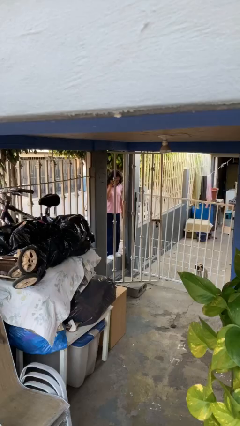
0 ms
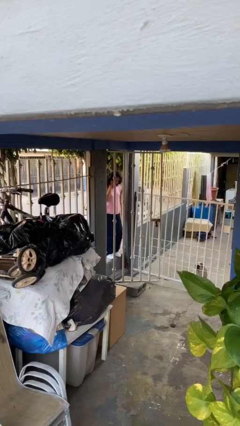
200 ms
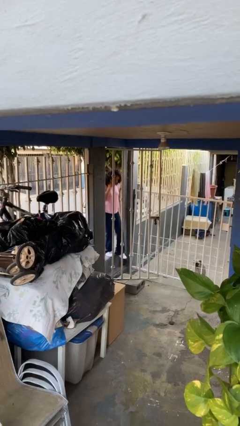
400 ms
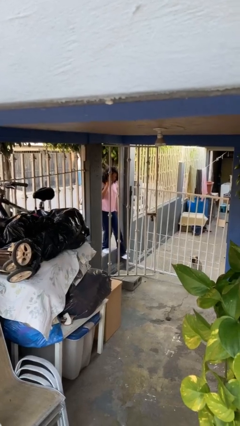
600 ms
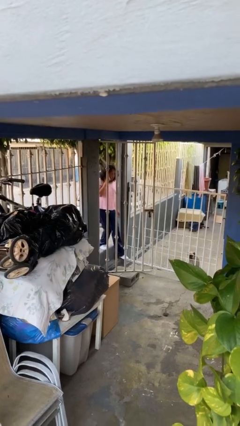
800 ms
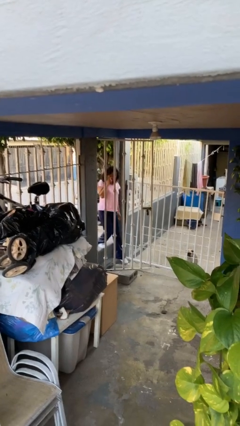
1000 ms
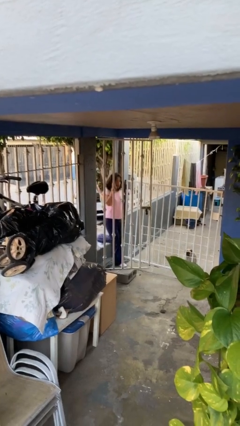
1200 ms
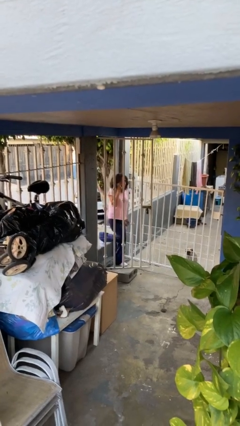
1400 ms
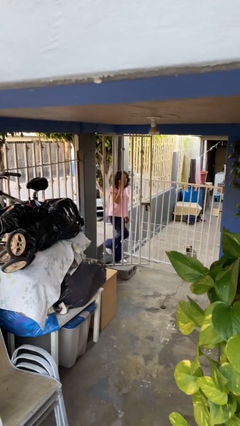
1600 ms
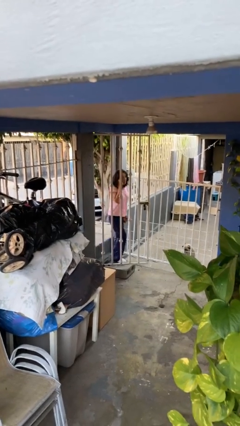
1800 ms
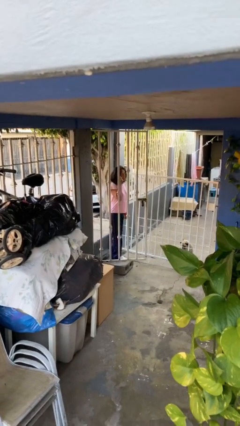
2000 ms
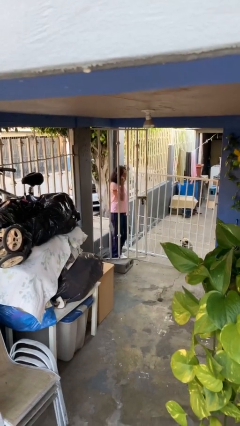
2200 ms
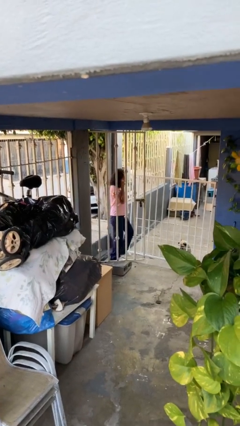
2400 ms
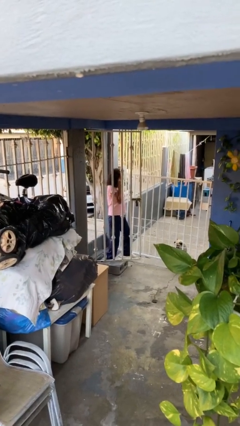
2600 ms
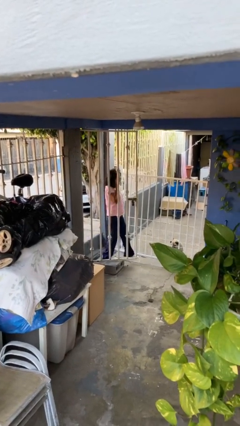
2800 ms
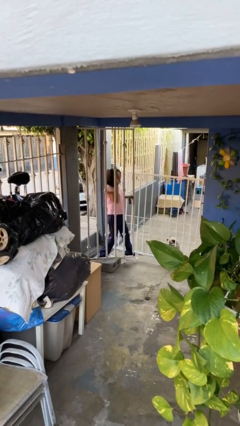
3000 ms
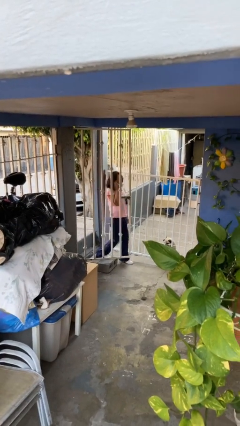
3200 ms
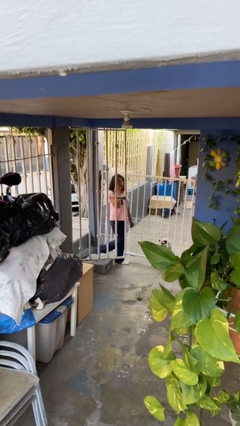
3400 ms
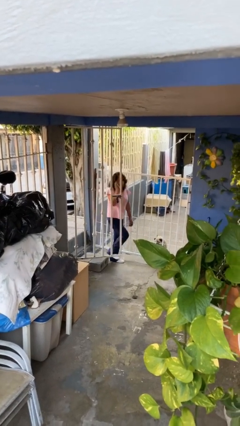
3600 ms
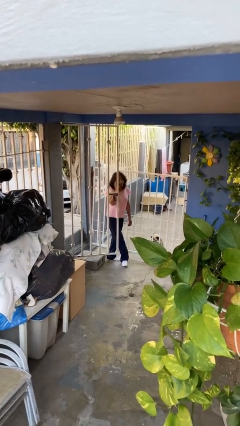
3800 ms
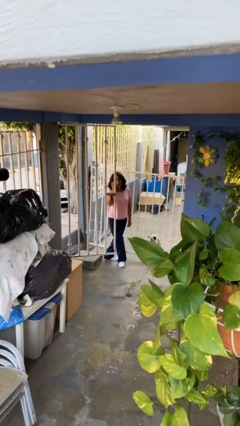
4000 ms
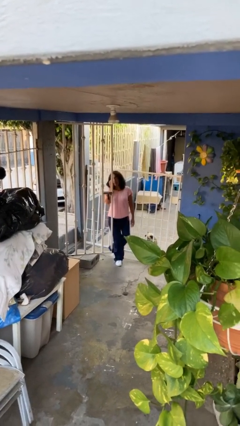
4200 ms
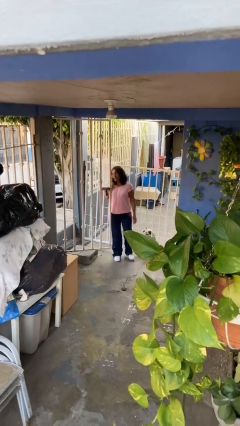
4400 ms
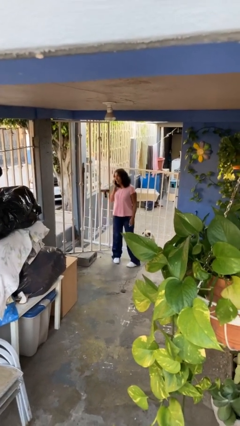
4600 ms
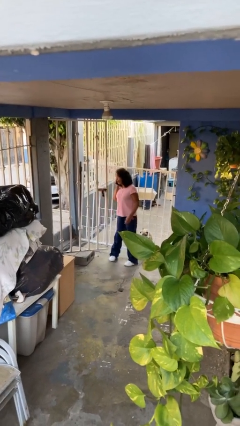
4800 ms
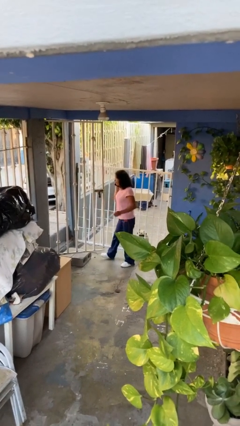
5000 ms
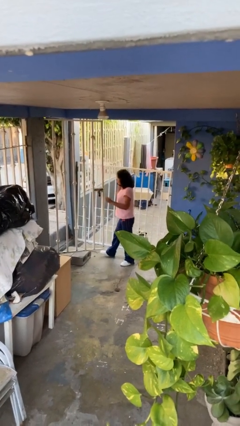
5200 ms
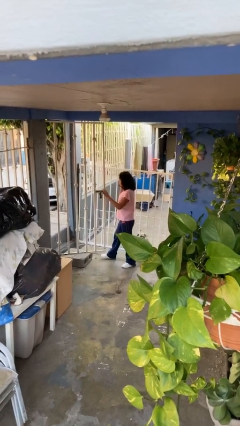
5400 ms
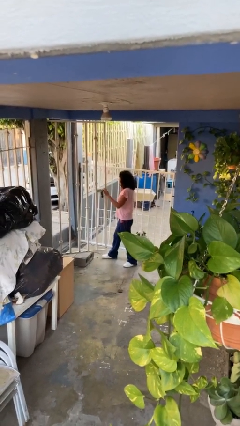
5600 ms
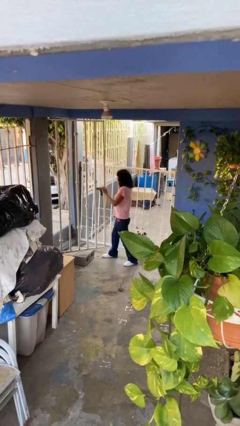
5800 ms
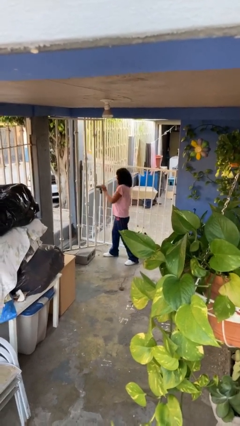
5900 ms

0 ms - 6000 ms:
person enters scene through structure

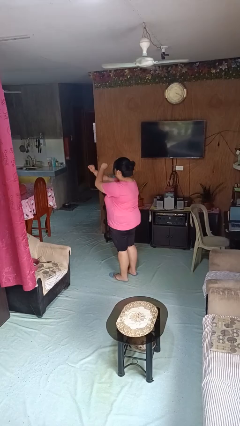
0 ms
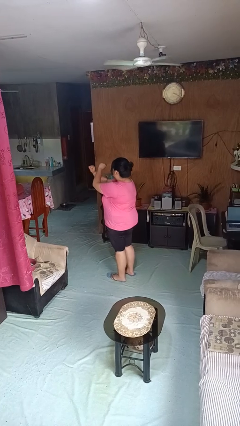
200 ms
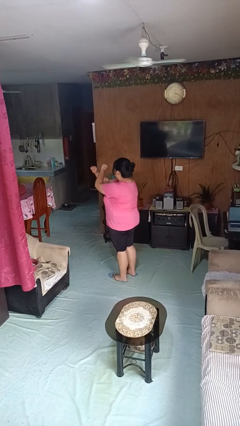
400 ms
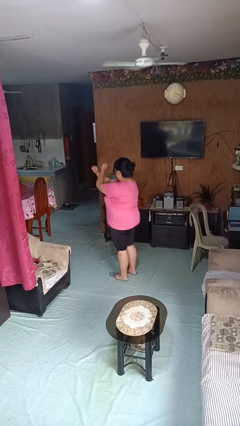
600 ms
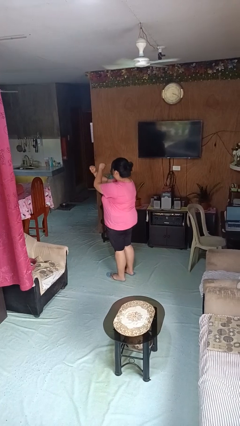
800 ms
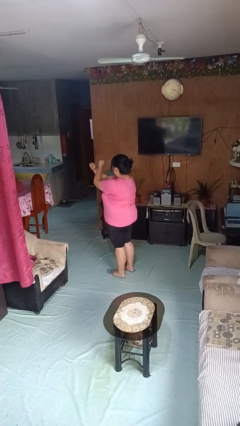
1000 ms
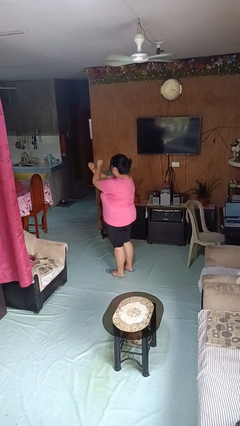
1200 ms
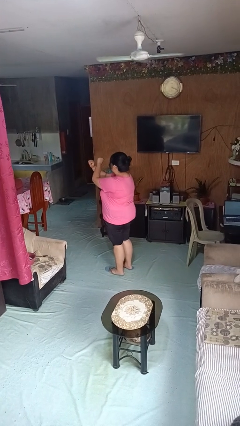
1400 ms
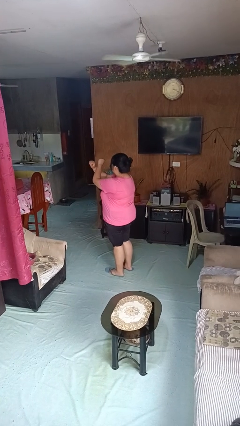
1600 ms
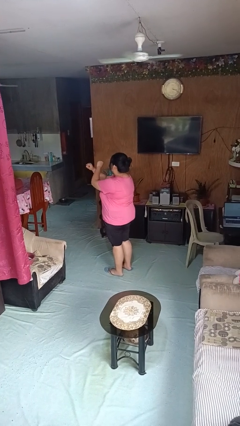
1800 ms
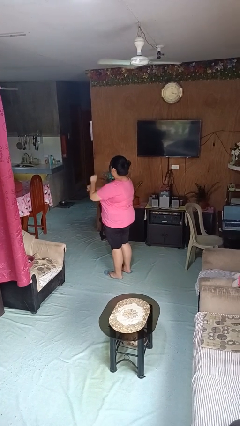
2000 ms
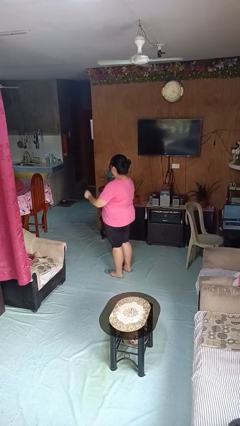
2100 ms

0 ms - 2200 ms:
person gestures arms x

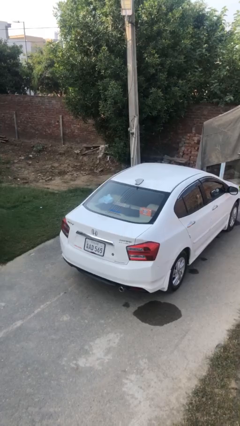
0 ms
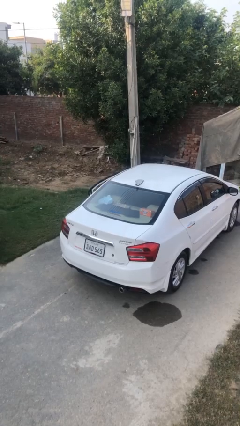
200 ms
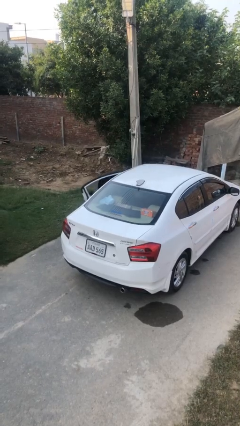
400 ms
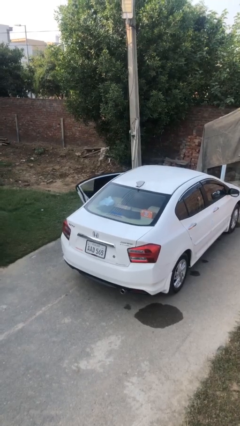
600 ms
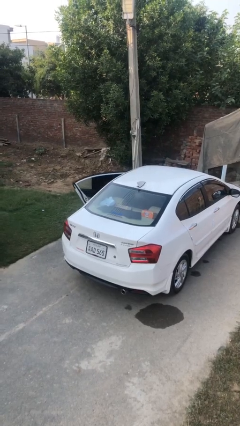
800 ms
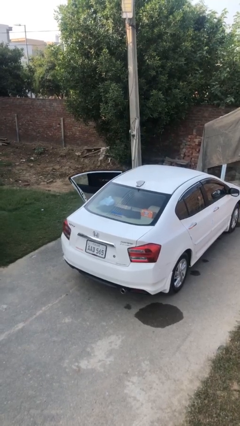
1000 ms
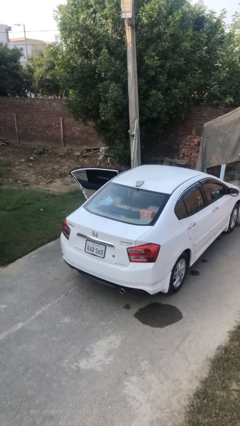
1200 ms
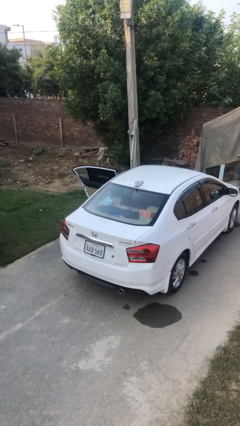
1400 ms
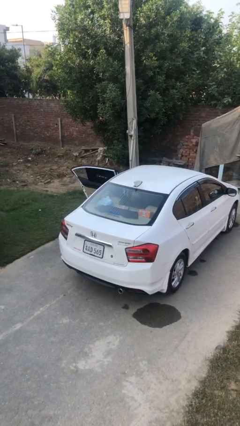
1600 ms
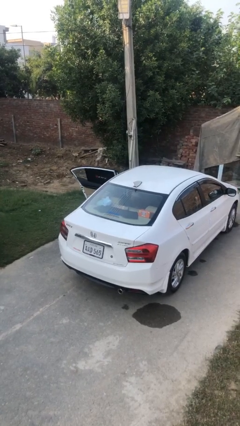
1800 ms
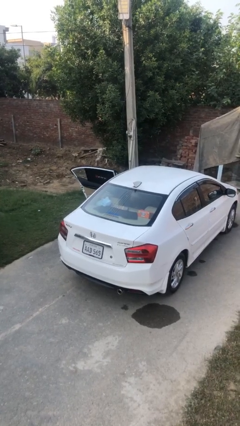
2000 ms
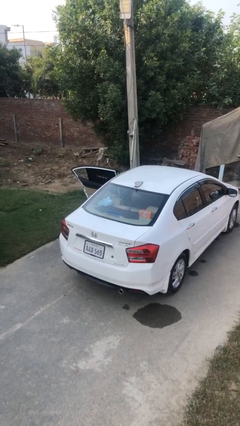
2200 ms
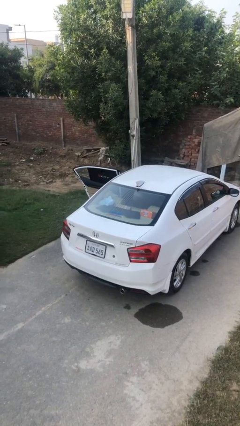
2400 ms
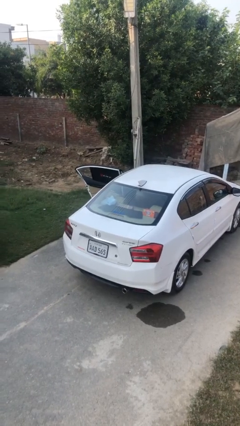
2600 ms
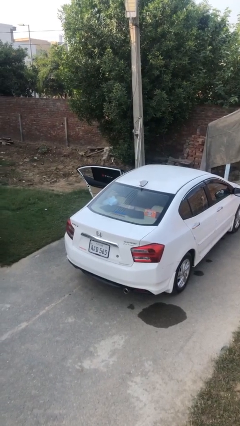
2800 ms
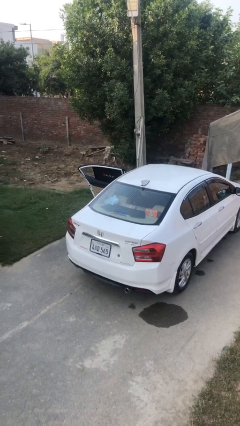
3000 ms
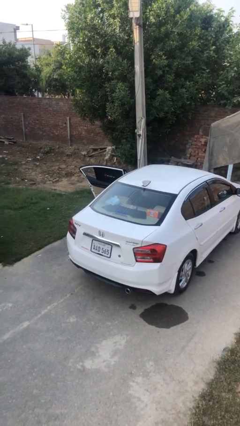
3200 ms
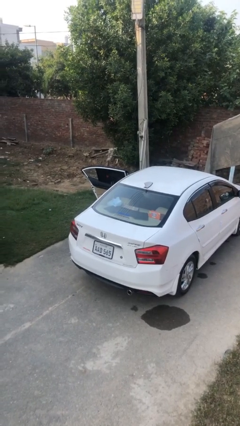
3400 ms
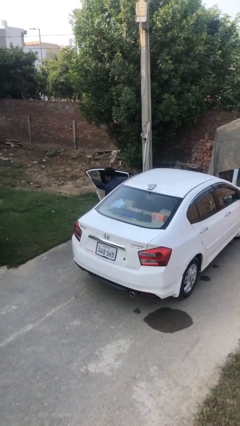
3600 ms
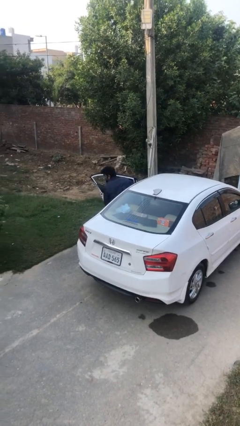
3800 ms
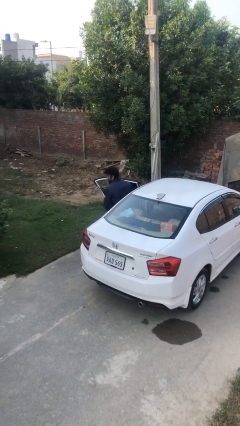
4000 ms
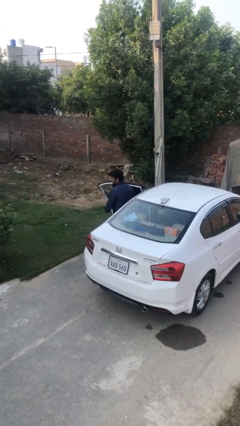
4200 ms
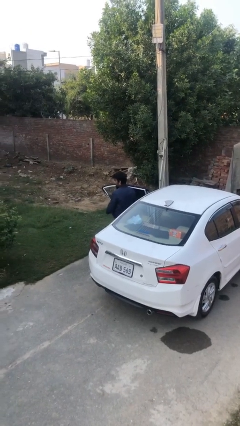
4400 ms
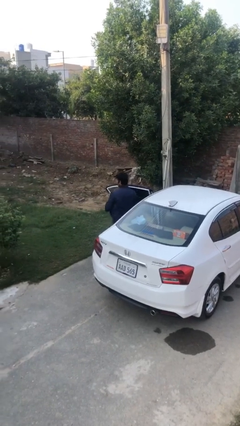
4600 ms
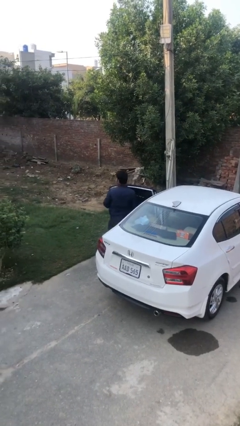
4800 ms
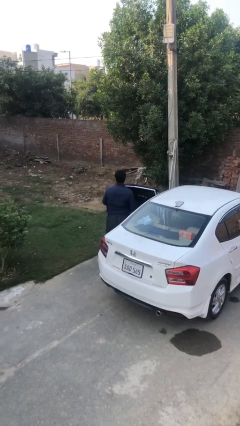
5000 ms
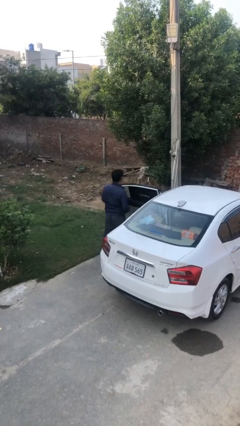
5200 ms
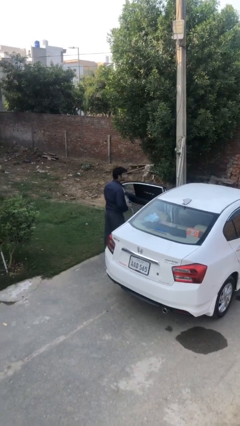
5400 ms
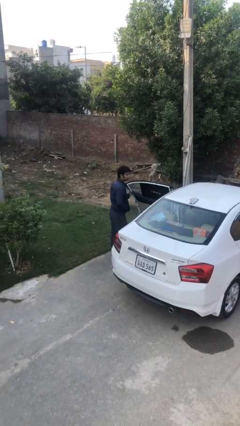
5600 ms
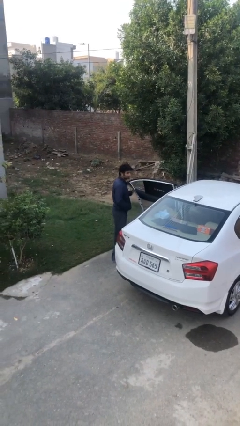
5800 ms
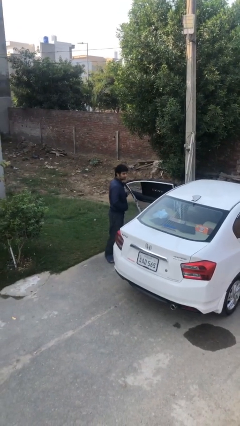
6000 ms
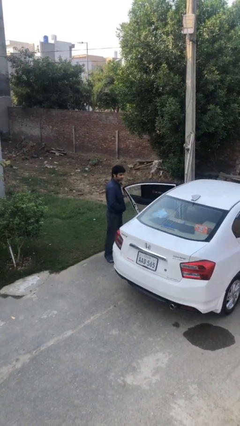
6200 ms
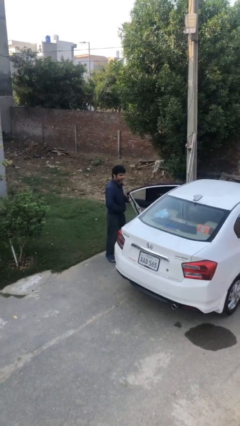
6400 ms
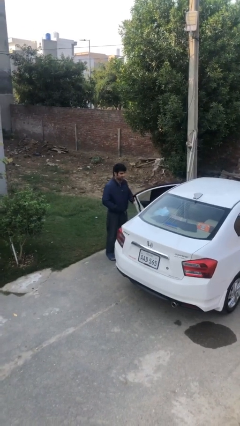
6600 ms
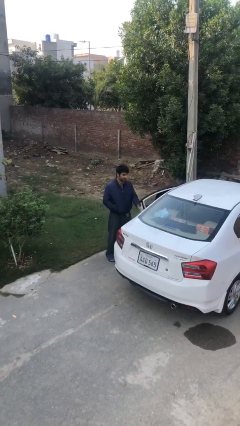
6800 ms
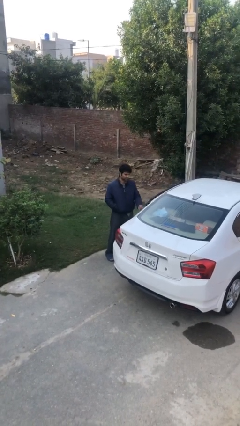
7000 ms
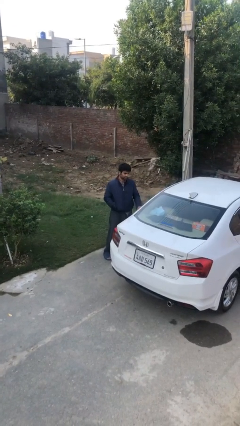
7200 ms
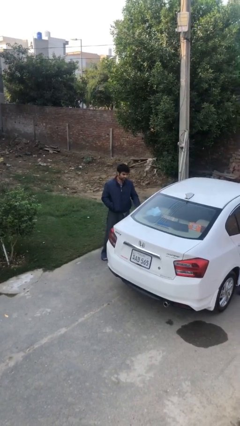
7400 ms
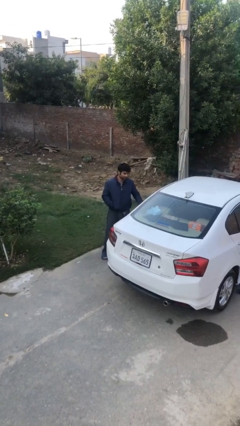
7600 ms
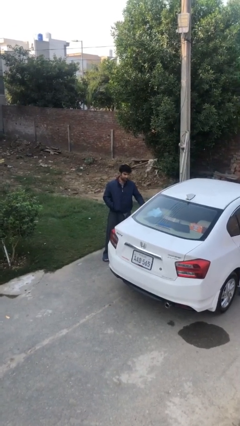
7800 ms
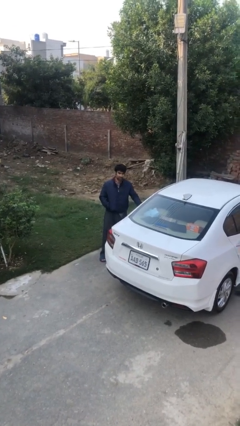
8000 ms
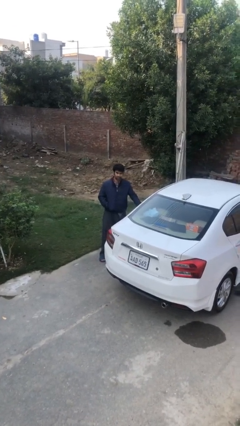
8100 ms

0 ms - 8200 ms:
car drops off person

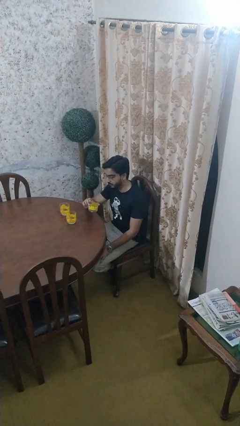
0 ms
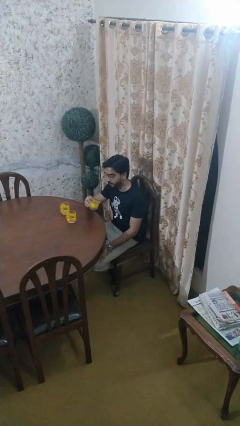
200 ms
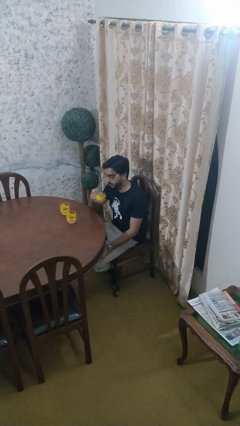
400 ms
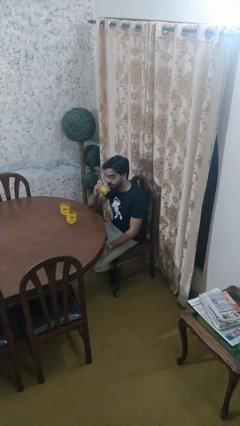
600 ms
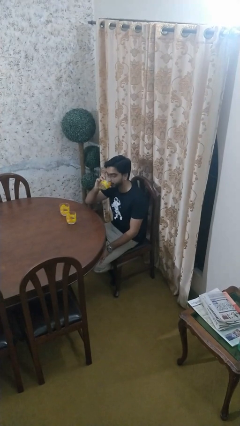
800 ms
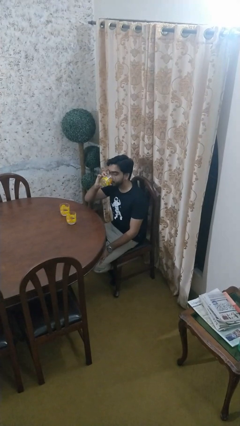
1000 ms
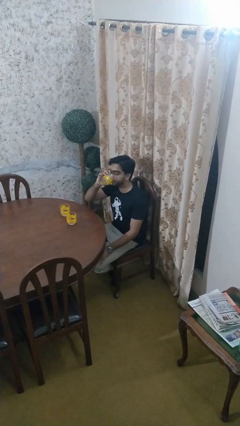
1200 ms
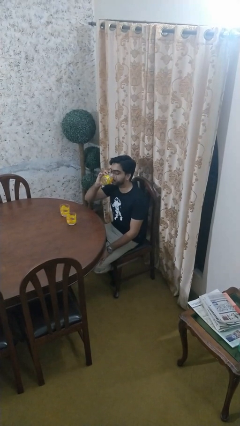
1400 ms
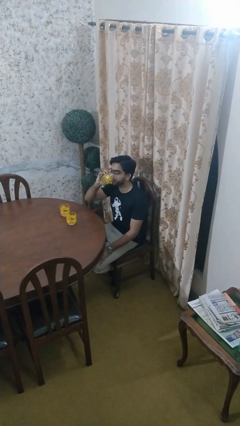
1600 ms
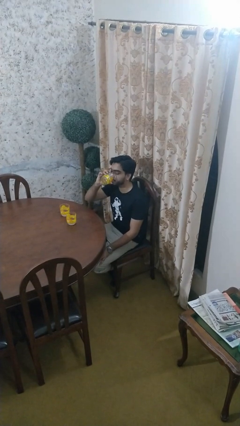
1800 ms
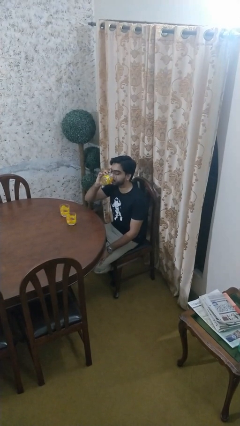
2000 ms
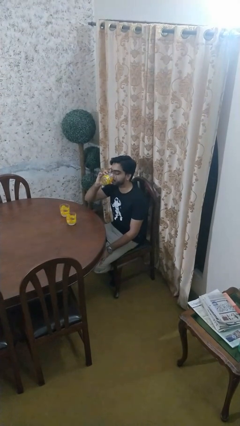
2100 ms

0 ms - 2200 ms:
person drinks from shotglass
